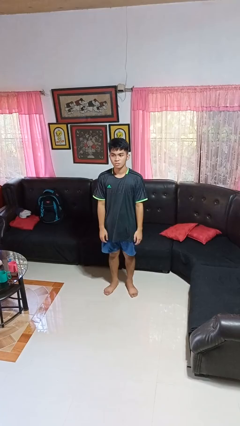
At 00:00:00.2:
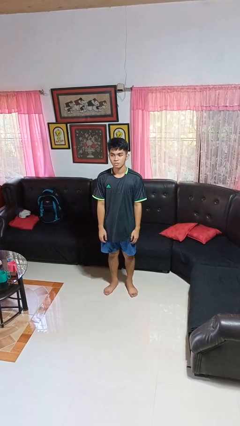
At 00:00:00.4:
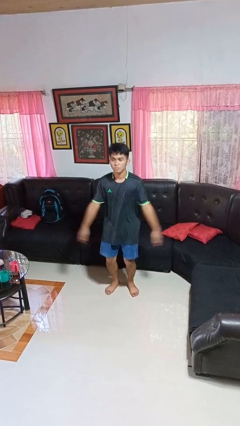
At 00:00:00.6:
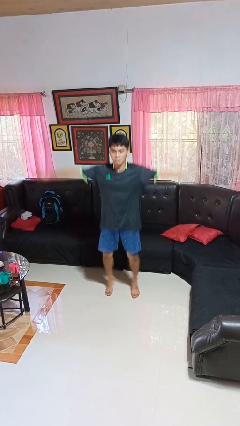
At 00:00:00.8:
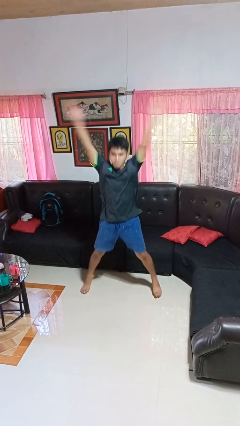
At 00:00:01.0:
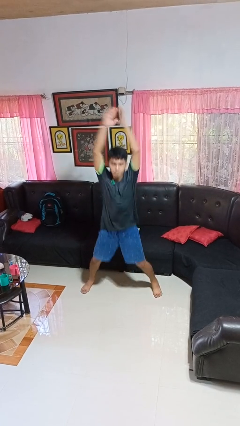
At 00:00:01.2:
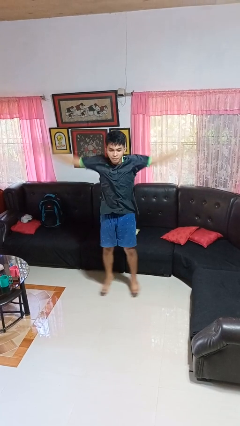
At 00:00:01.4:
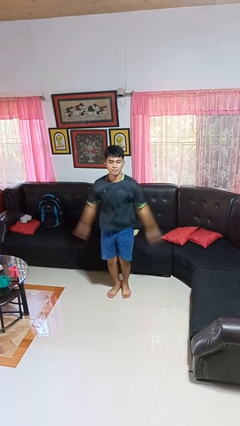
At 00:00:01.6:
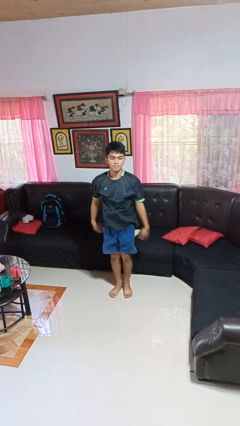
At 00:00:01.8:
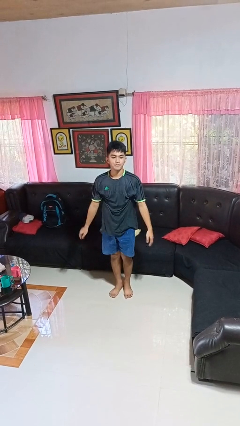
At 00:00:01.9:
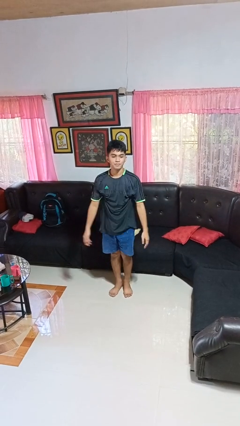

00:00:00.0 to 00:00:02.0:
person exercises with jumping jacks

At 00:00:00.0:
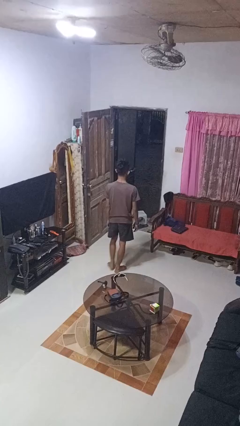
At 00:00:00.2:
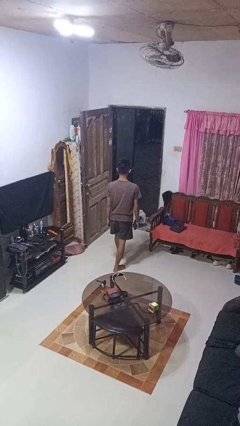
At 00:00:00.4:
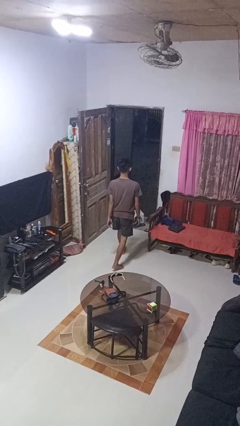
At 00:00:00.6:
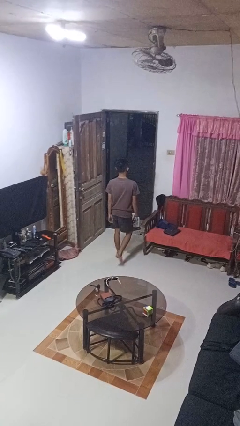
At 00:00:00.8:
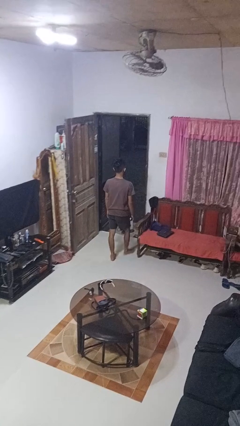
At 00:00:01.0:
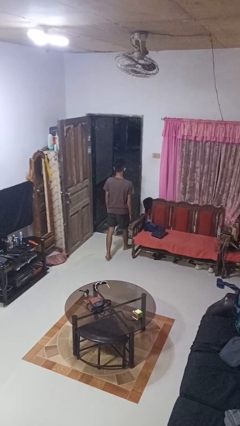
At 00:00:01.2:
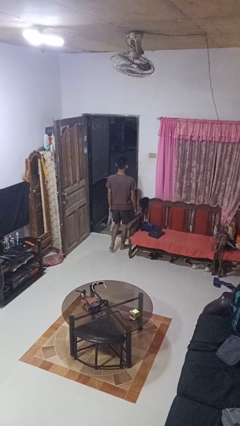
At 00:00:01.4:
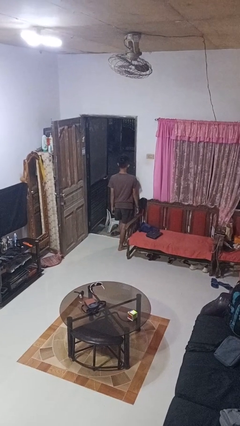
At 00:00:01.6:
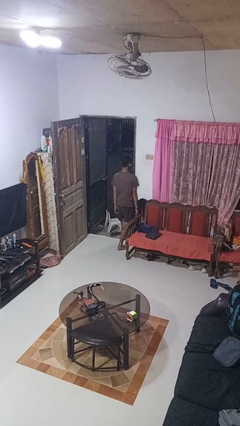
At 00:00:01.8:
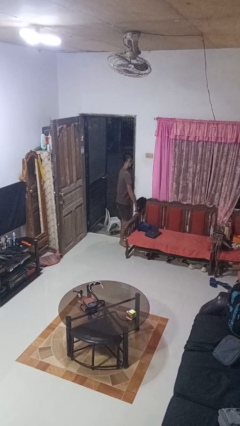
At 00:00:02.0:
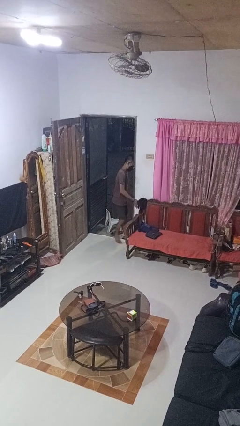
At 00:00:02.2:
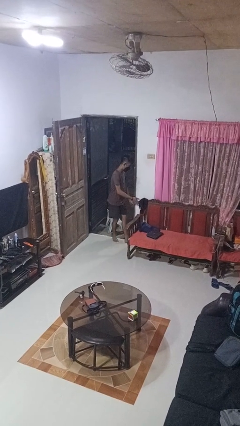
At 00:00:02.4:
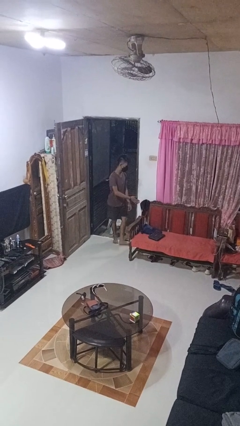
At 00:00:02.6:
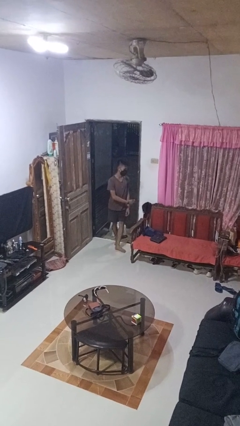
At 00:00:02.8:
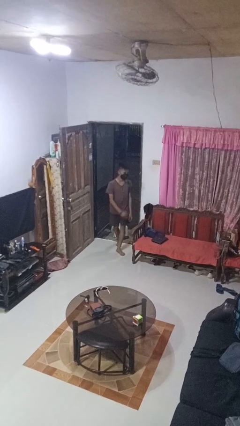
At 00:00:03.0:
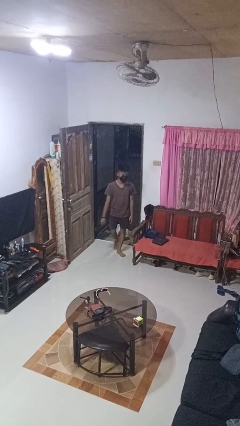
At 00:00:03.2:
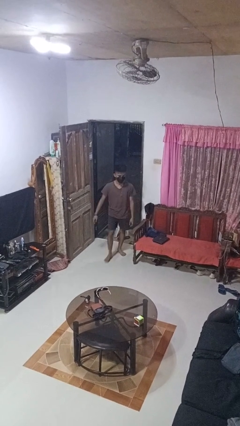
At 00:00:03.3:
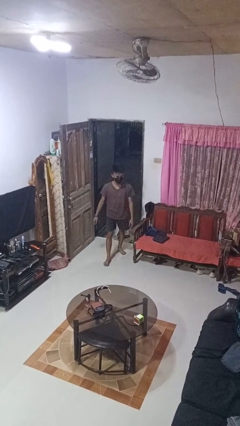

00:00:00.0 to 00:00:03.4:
person bumps into wall

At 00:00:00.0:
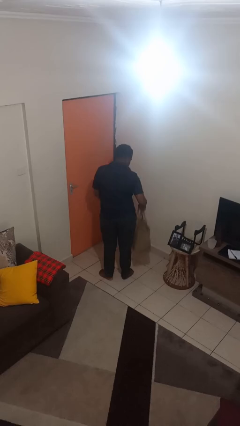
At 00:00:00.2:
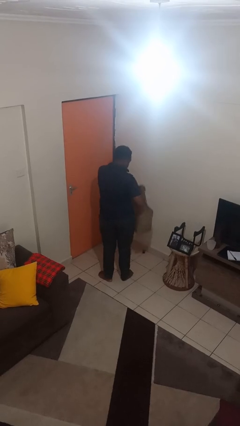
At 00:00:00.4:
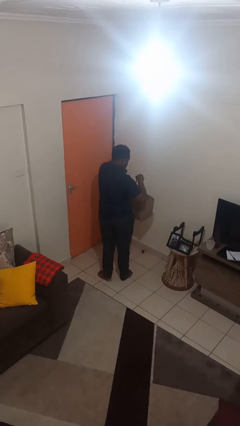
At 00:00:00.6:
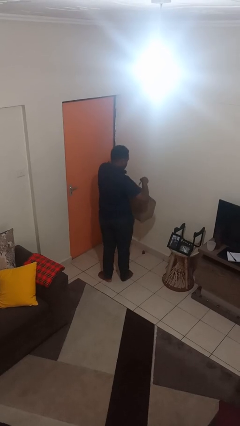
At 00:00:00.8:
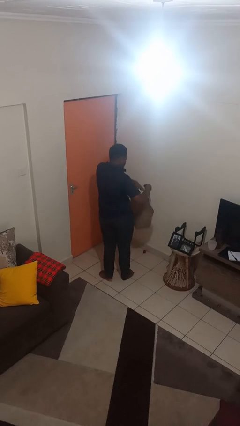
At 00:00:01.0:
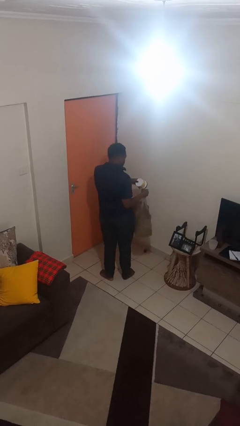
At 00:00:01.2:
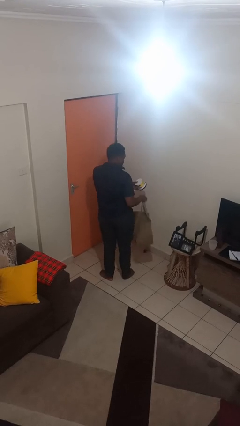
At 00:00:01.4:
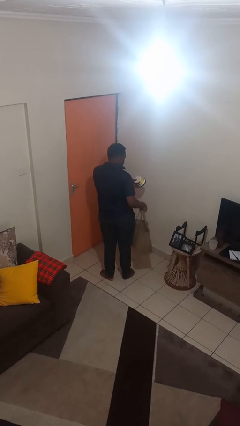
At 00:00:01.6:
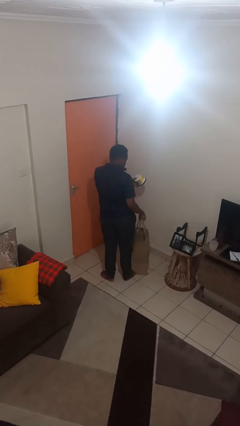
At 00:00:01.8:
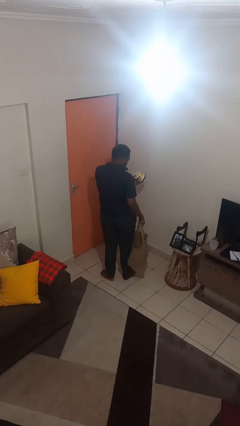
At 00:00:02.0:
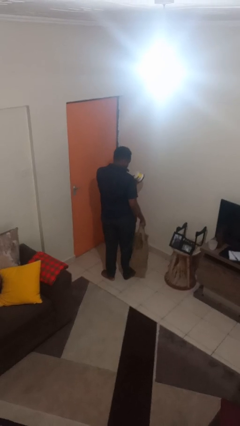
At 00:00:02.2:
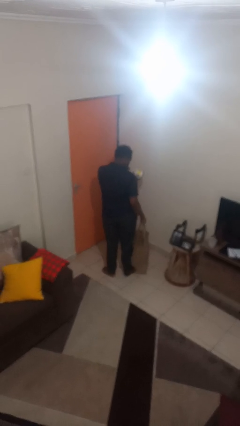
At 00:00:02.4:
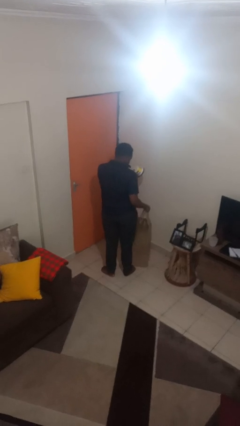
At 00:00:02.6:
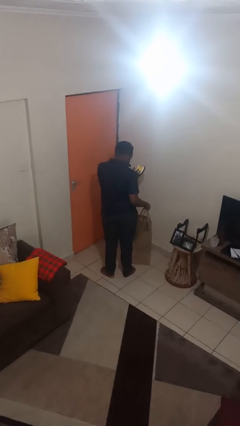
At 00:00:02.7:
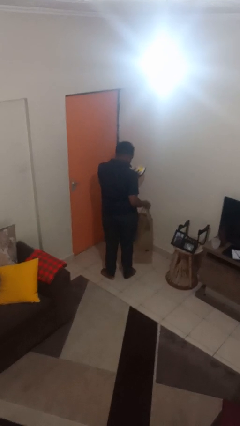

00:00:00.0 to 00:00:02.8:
person takes object from bag

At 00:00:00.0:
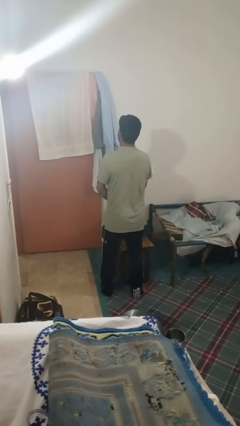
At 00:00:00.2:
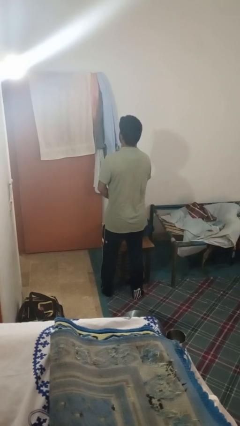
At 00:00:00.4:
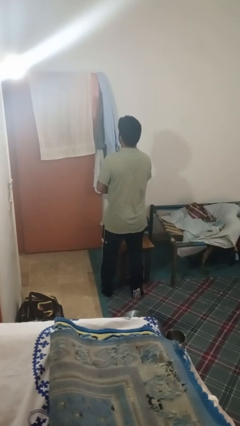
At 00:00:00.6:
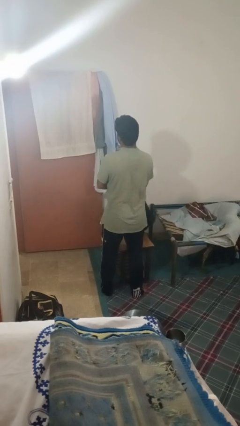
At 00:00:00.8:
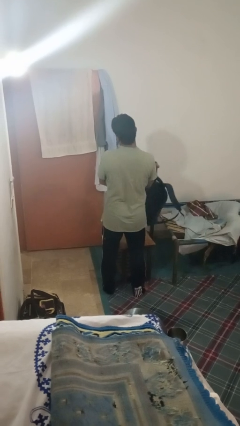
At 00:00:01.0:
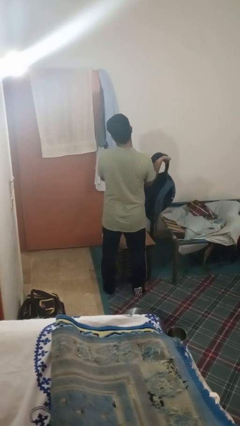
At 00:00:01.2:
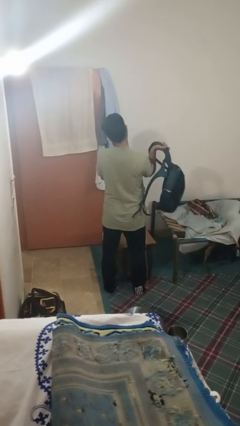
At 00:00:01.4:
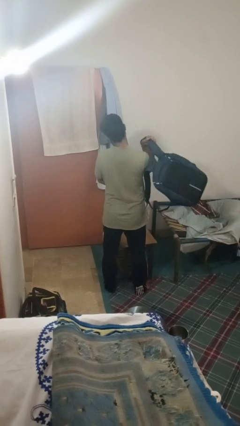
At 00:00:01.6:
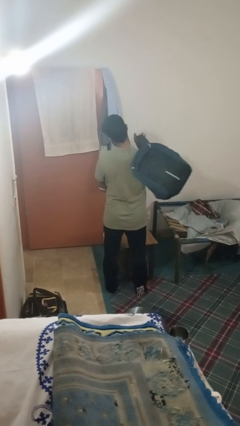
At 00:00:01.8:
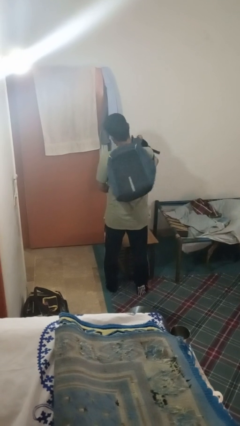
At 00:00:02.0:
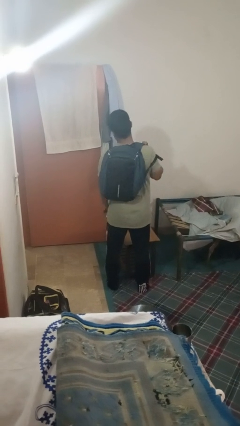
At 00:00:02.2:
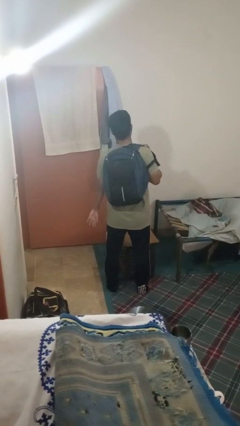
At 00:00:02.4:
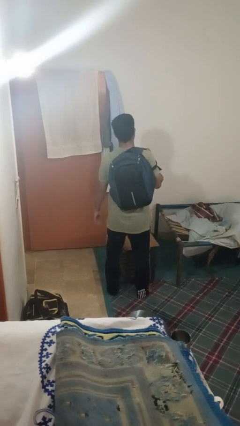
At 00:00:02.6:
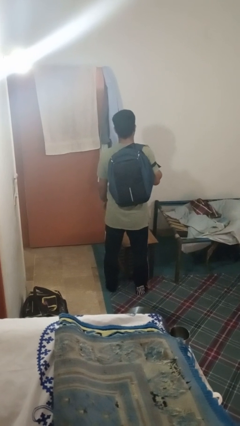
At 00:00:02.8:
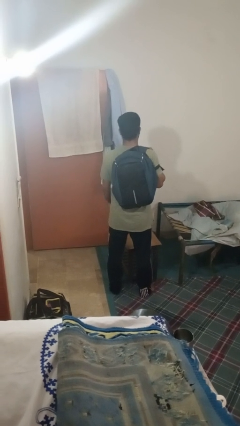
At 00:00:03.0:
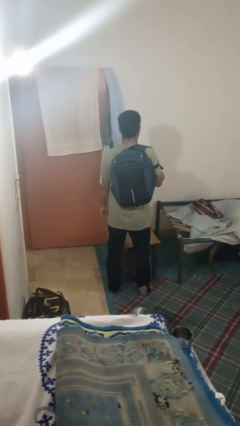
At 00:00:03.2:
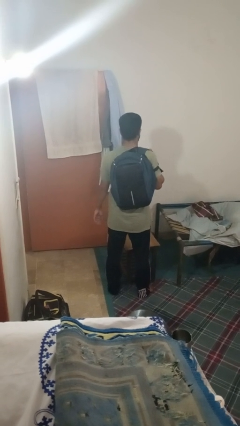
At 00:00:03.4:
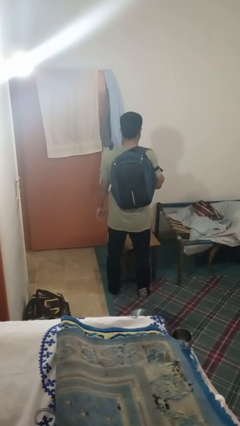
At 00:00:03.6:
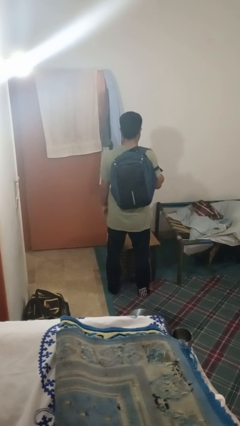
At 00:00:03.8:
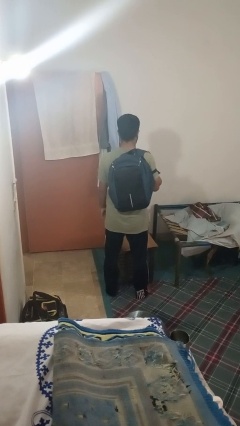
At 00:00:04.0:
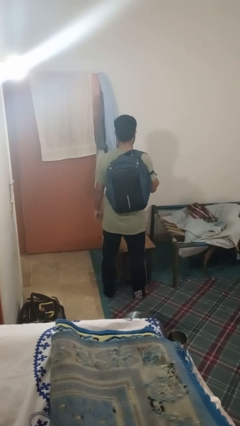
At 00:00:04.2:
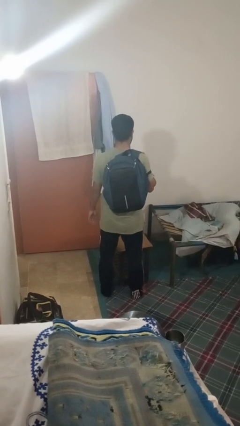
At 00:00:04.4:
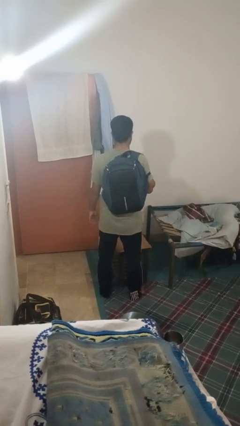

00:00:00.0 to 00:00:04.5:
person puts on backpack

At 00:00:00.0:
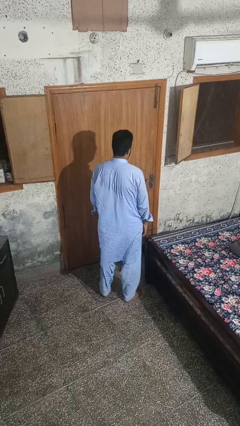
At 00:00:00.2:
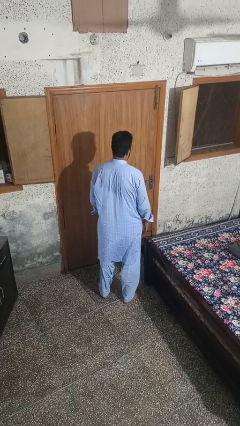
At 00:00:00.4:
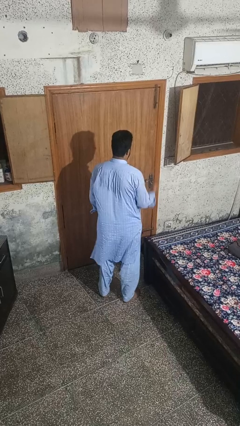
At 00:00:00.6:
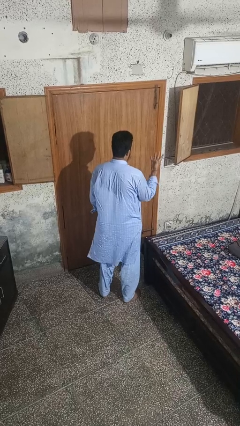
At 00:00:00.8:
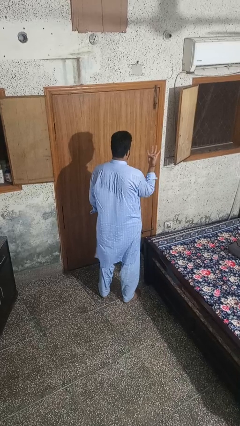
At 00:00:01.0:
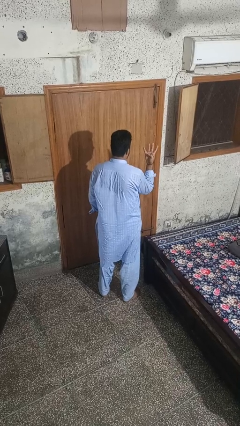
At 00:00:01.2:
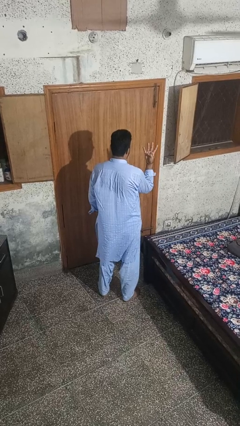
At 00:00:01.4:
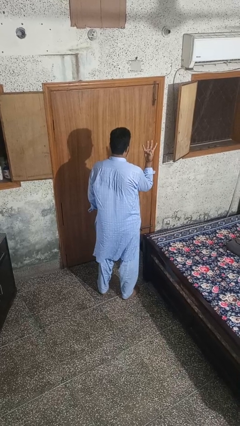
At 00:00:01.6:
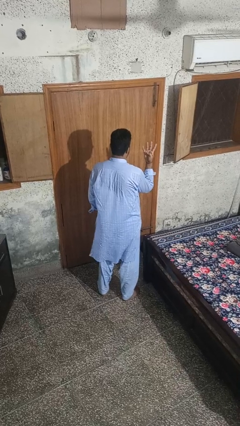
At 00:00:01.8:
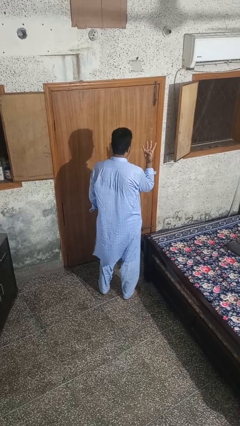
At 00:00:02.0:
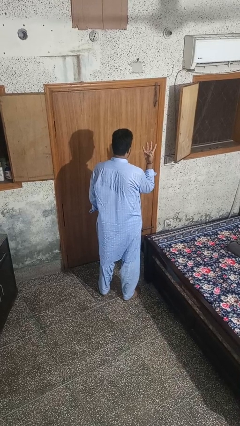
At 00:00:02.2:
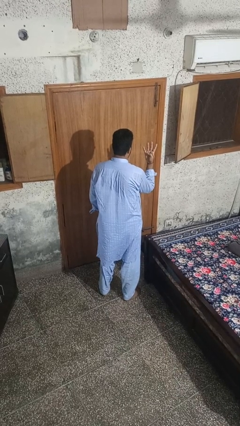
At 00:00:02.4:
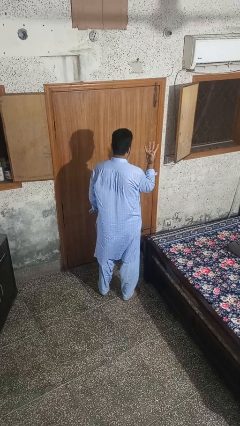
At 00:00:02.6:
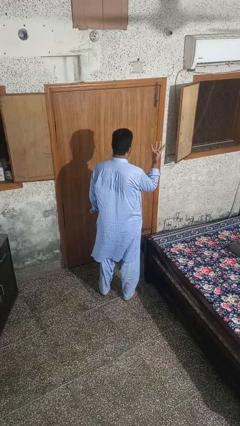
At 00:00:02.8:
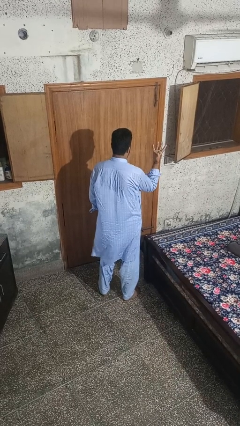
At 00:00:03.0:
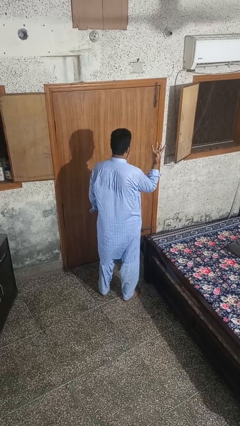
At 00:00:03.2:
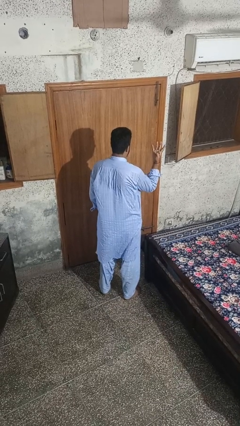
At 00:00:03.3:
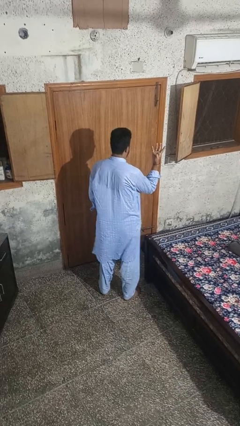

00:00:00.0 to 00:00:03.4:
person gestures number four

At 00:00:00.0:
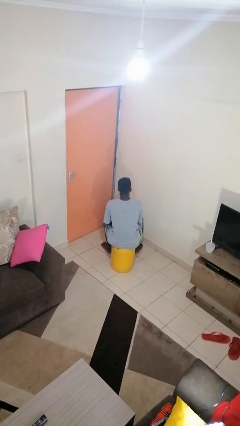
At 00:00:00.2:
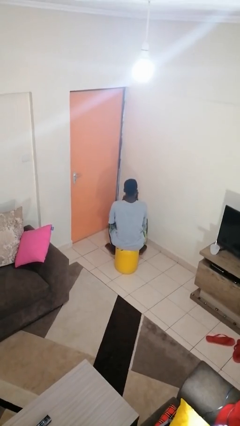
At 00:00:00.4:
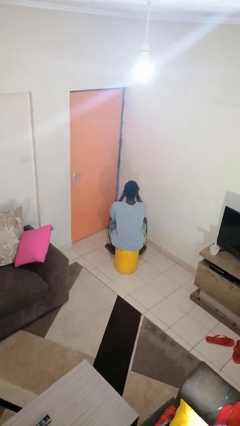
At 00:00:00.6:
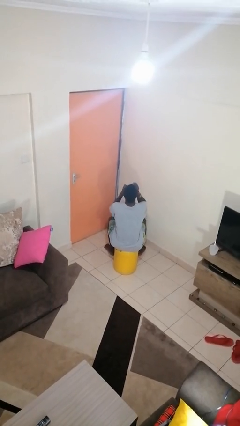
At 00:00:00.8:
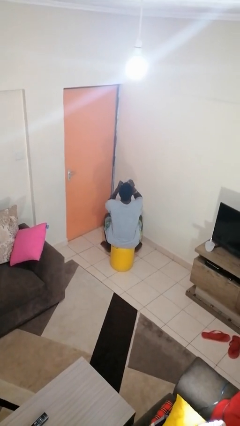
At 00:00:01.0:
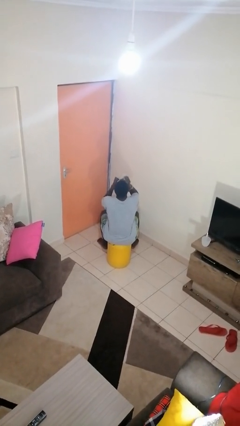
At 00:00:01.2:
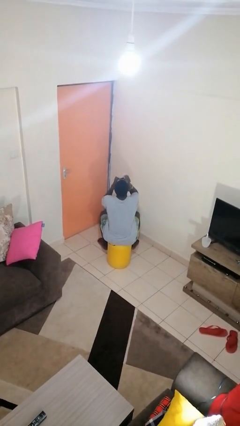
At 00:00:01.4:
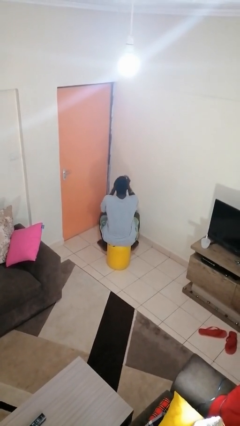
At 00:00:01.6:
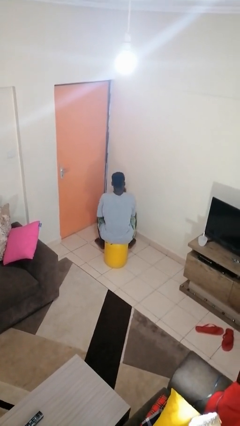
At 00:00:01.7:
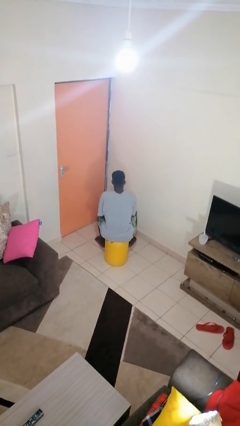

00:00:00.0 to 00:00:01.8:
person drinks from mug
